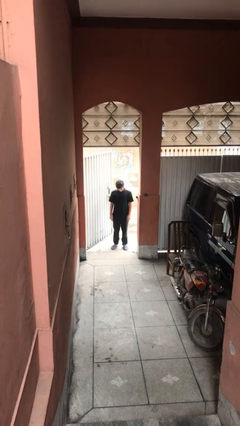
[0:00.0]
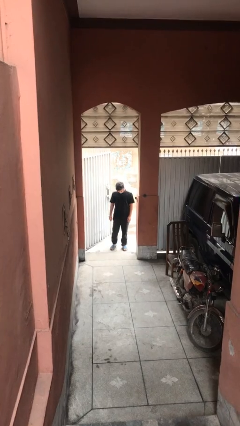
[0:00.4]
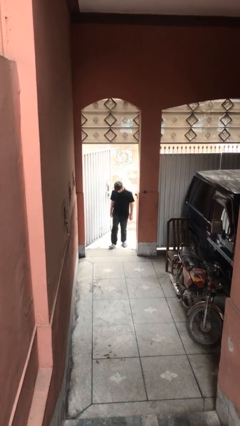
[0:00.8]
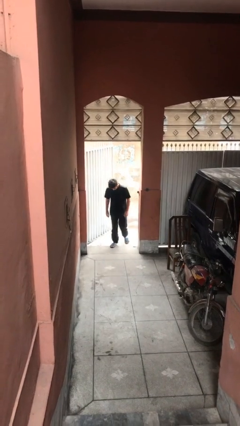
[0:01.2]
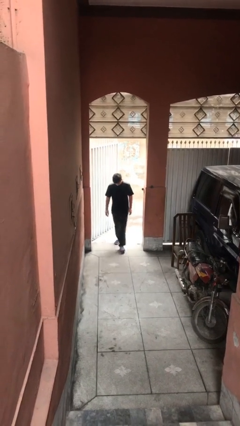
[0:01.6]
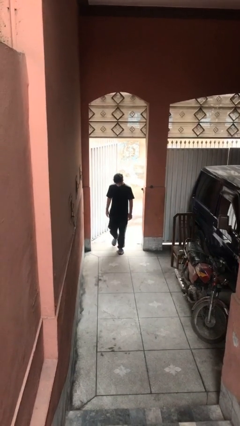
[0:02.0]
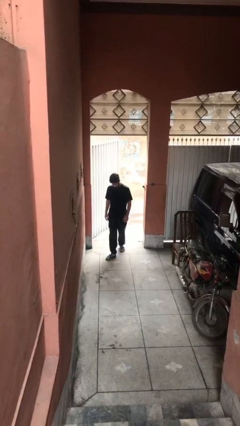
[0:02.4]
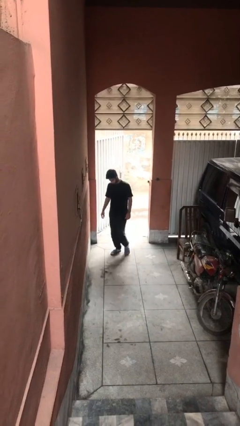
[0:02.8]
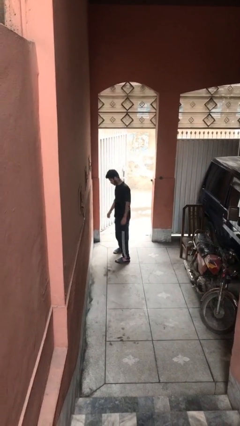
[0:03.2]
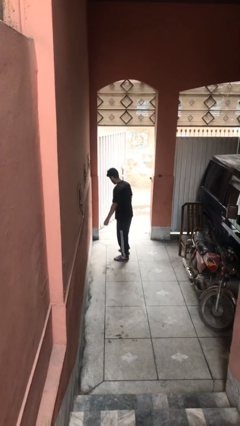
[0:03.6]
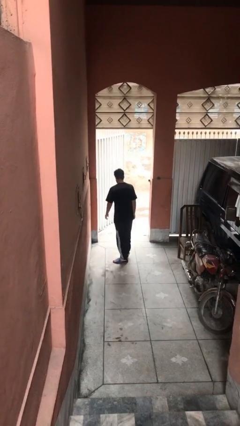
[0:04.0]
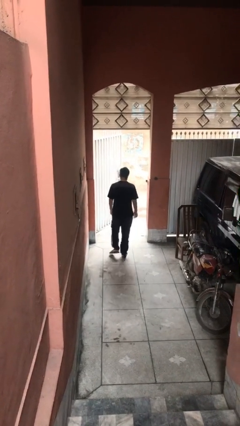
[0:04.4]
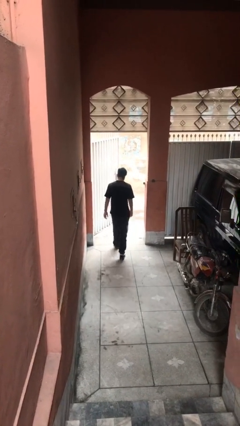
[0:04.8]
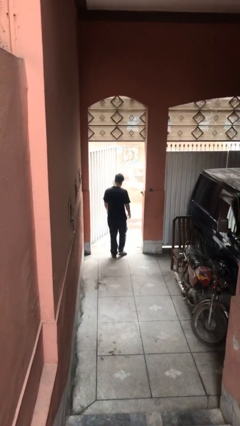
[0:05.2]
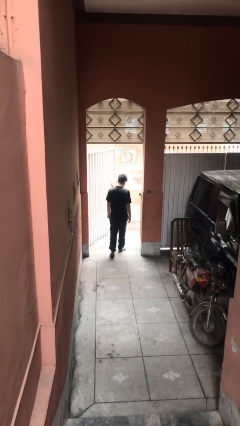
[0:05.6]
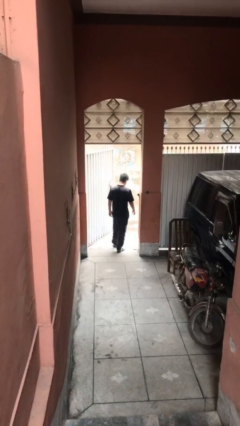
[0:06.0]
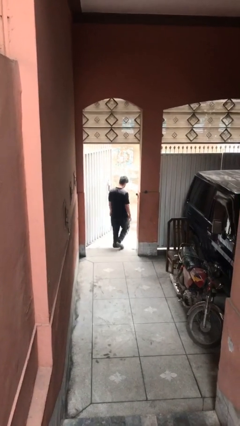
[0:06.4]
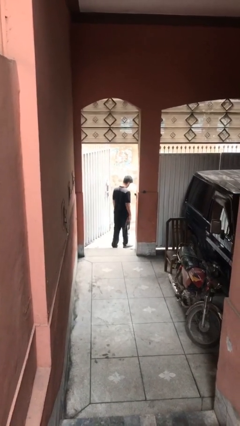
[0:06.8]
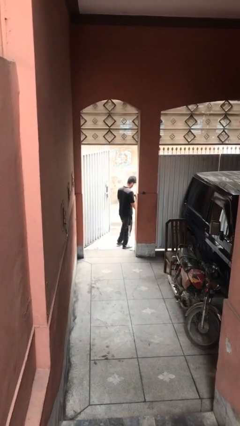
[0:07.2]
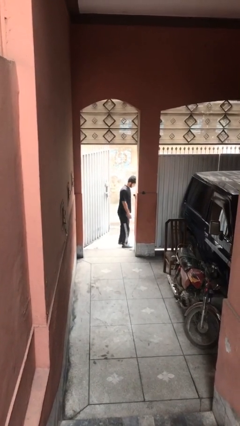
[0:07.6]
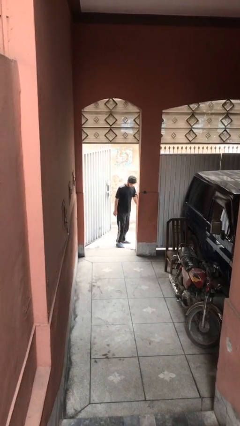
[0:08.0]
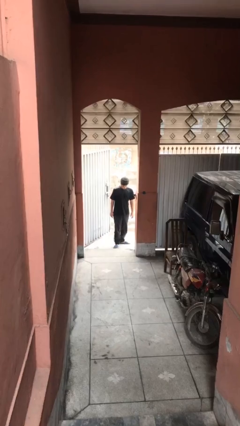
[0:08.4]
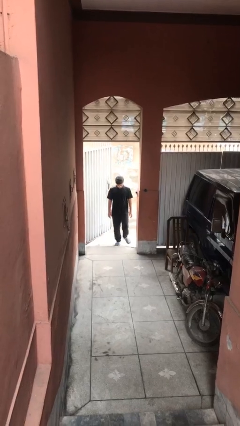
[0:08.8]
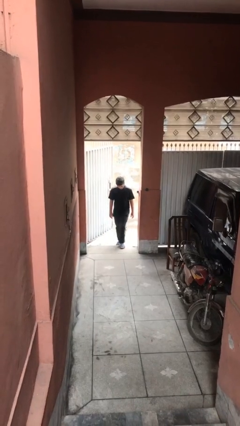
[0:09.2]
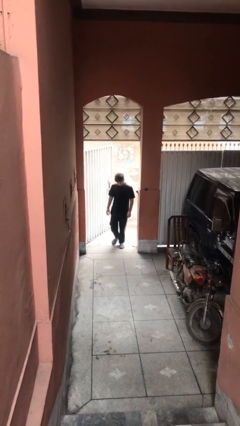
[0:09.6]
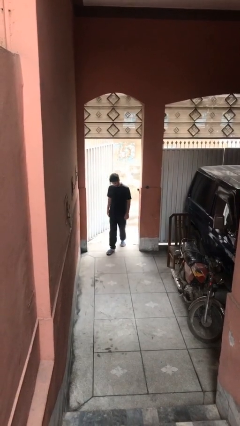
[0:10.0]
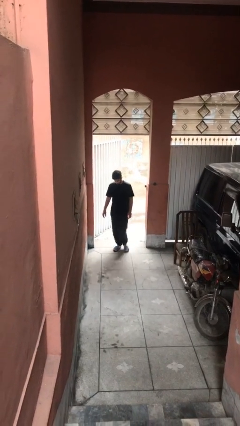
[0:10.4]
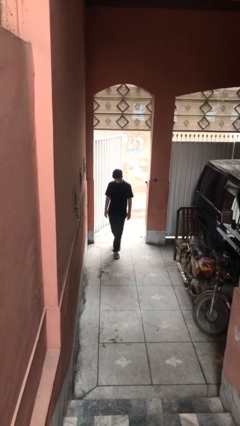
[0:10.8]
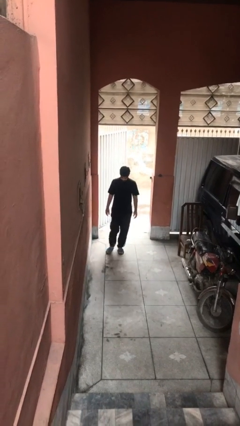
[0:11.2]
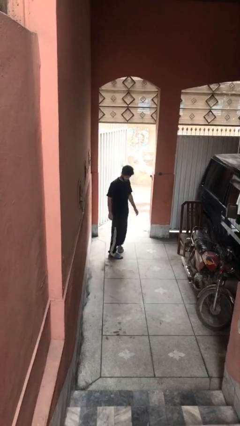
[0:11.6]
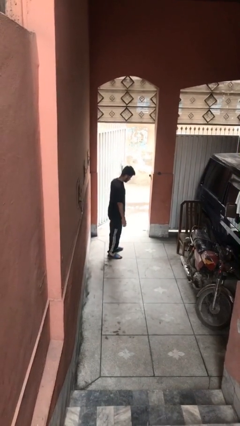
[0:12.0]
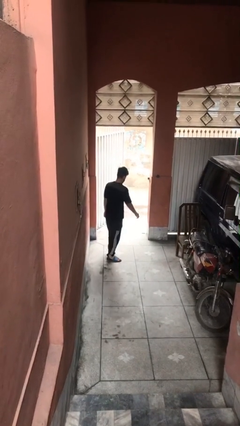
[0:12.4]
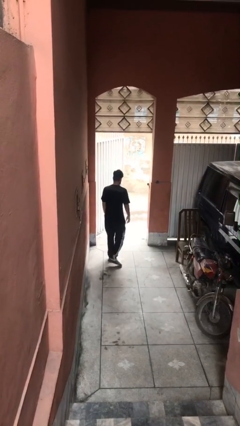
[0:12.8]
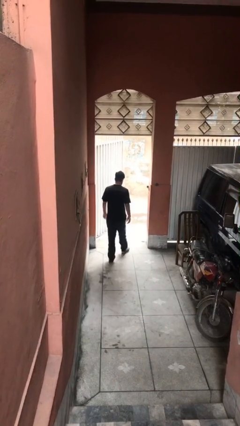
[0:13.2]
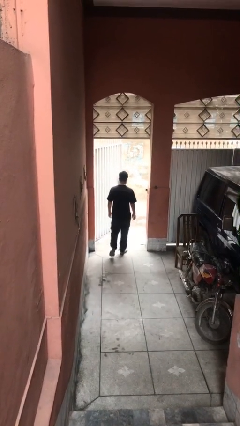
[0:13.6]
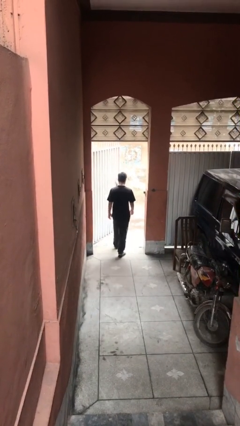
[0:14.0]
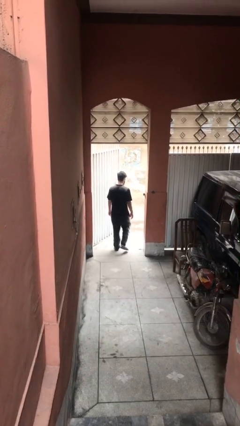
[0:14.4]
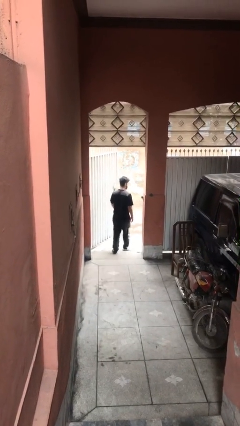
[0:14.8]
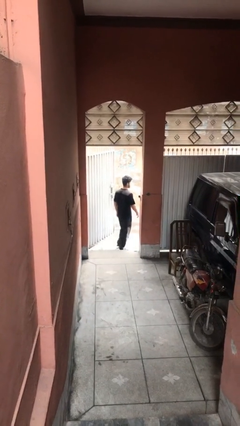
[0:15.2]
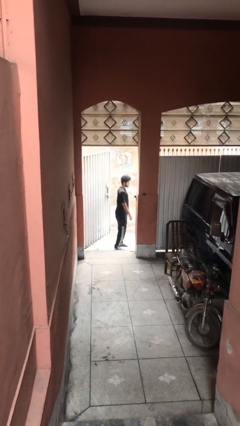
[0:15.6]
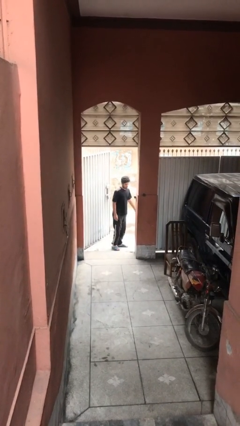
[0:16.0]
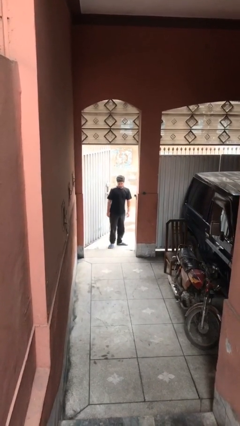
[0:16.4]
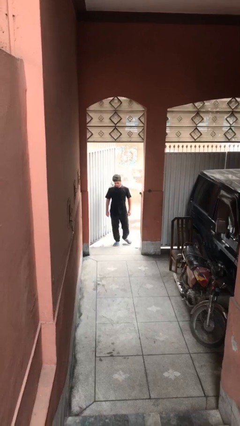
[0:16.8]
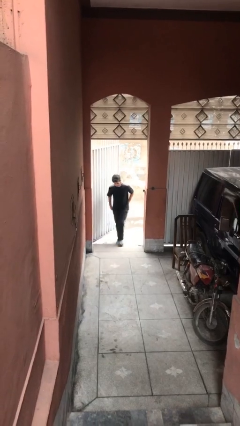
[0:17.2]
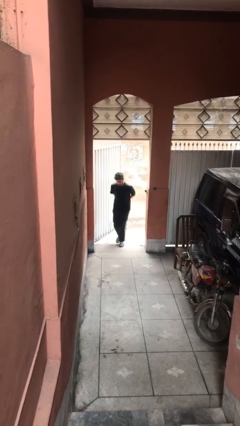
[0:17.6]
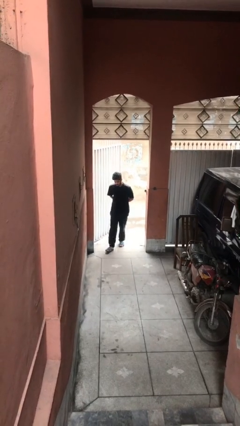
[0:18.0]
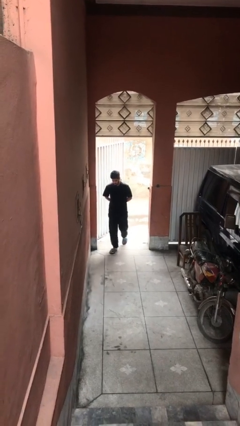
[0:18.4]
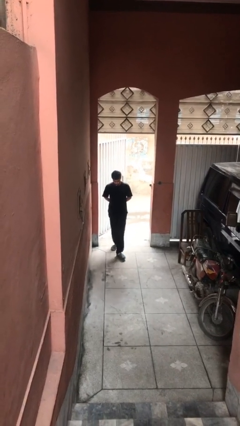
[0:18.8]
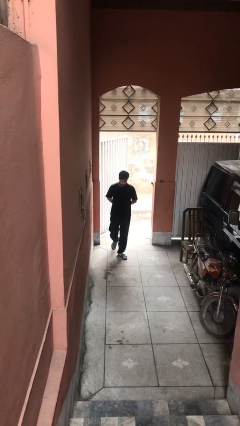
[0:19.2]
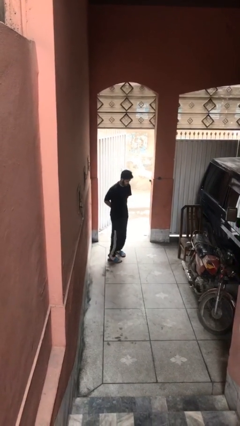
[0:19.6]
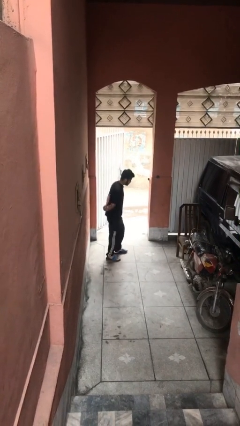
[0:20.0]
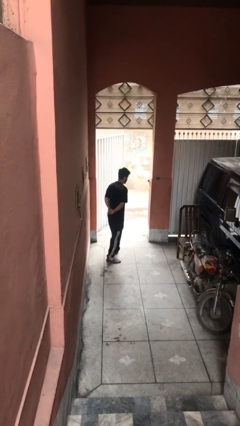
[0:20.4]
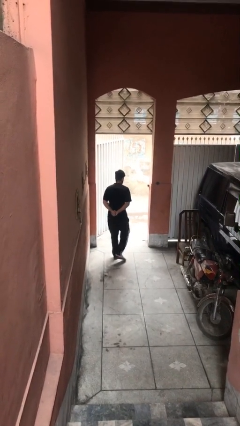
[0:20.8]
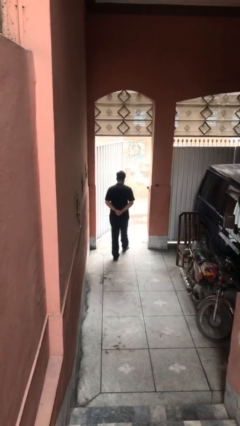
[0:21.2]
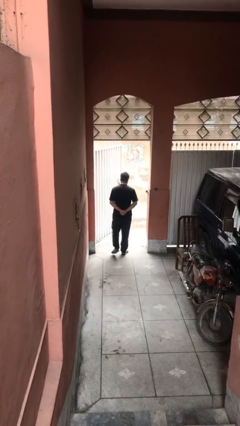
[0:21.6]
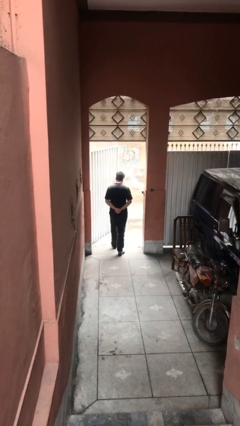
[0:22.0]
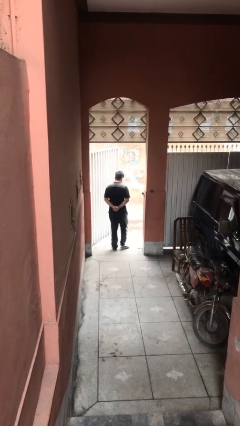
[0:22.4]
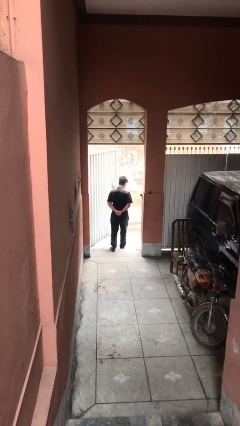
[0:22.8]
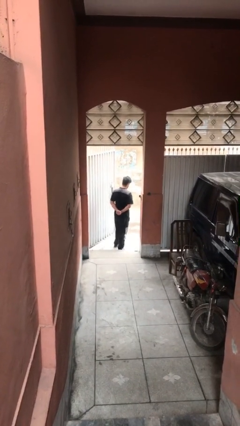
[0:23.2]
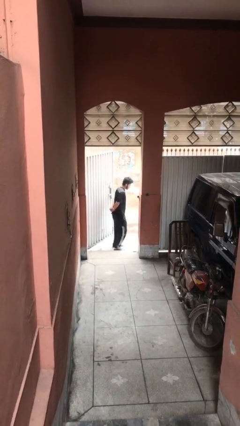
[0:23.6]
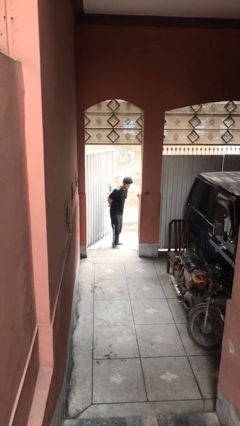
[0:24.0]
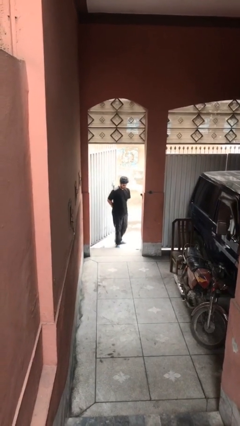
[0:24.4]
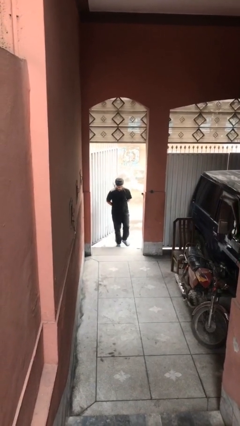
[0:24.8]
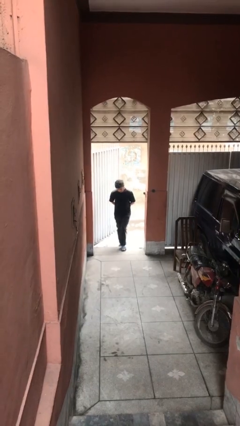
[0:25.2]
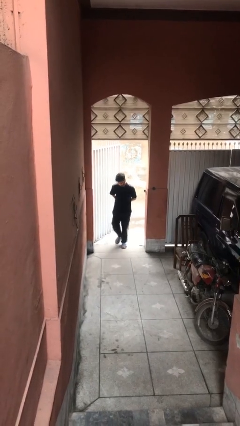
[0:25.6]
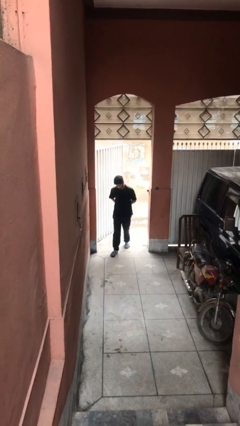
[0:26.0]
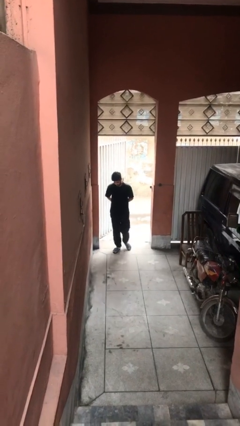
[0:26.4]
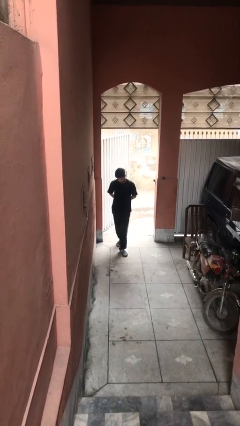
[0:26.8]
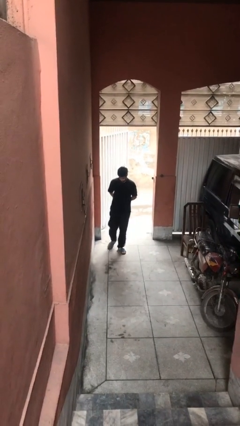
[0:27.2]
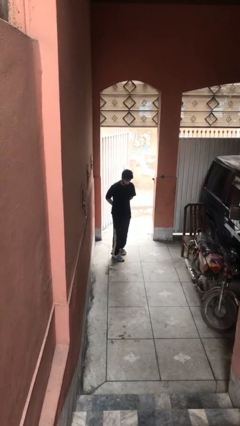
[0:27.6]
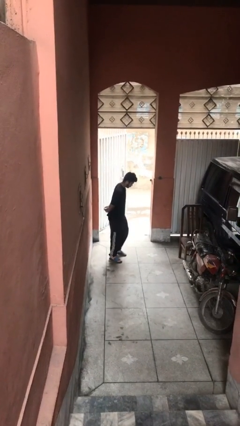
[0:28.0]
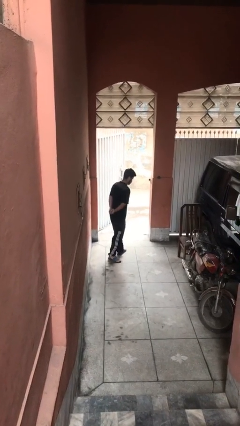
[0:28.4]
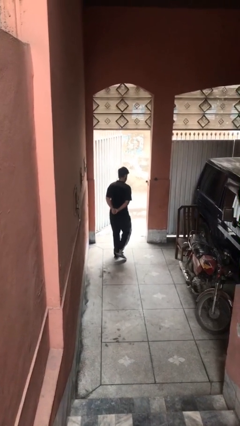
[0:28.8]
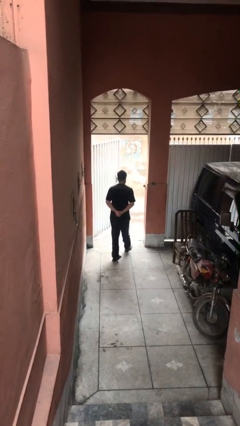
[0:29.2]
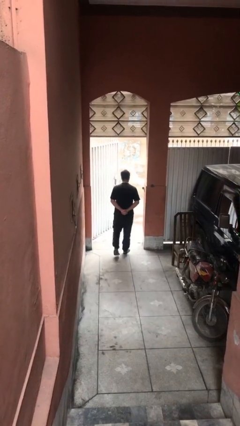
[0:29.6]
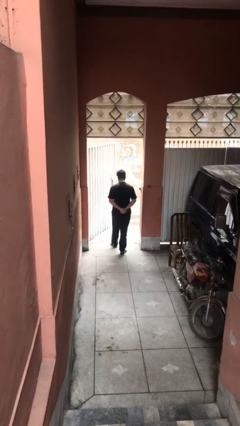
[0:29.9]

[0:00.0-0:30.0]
person walks

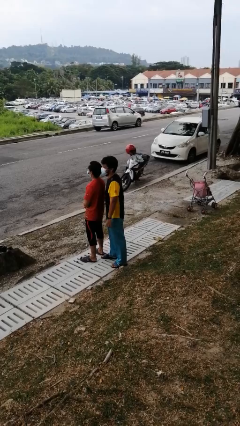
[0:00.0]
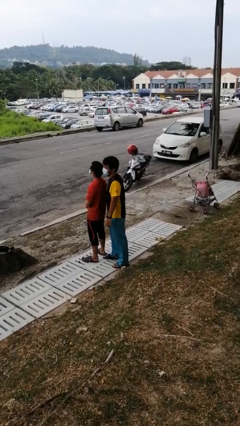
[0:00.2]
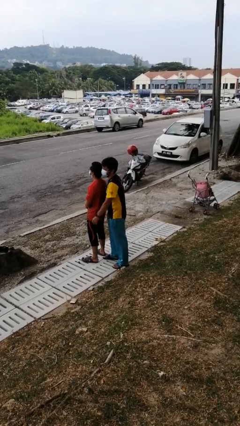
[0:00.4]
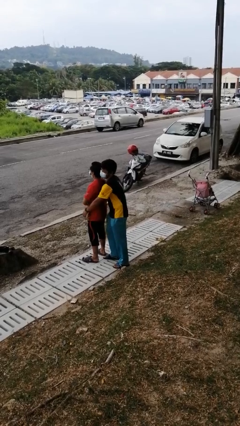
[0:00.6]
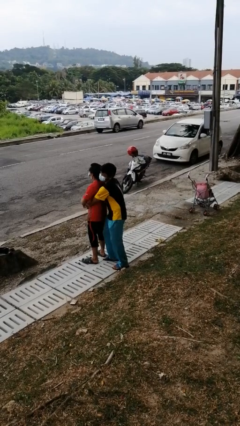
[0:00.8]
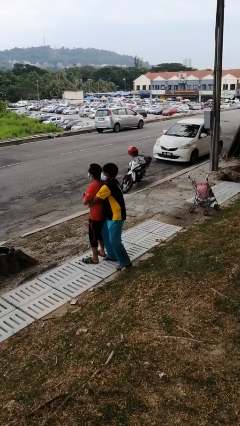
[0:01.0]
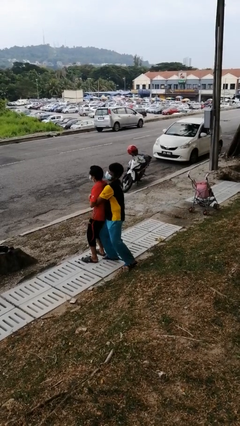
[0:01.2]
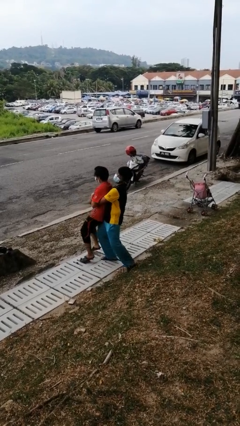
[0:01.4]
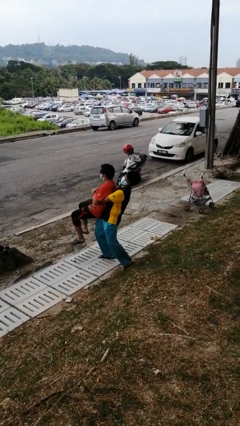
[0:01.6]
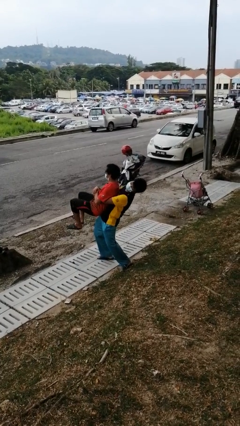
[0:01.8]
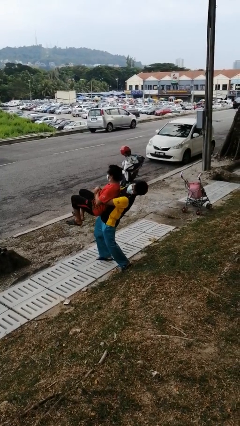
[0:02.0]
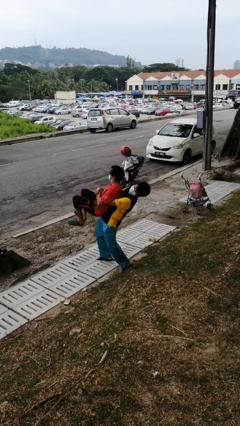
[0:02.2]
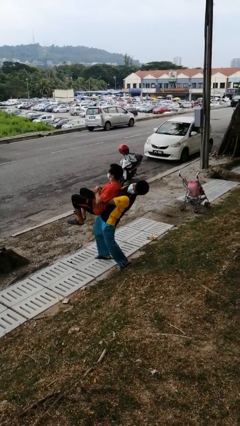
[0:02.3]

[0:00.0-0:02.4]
person picks up person

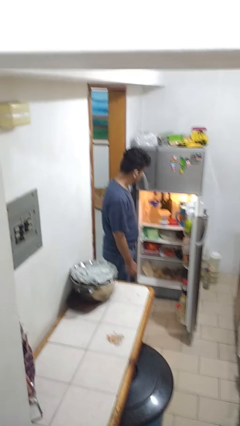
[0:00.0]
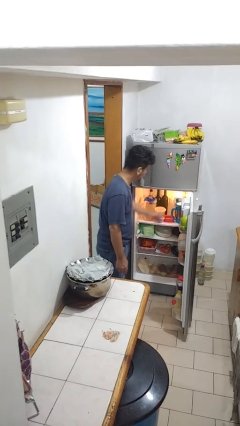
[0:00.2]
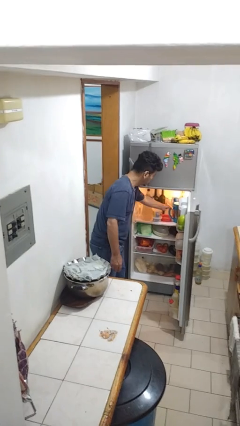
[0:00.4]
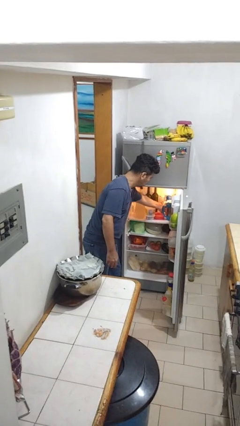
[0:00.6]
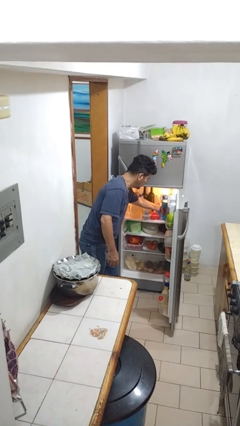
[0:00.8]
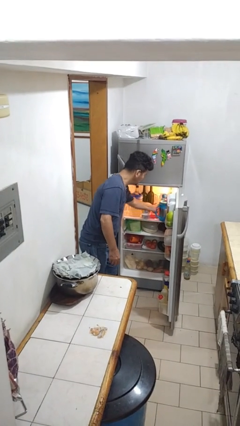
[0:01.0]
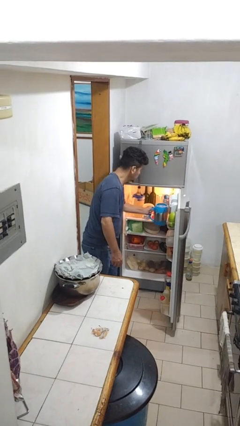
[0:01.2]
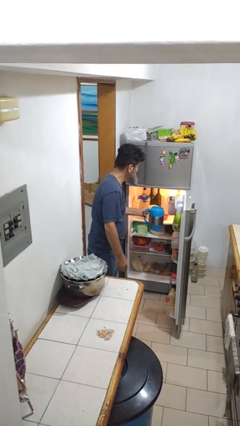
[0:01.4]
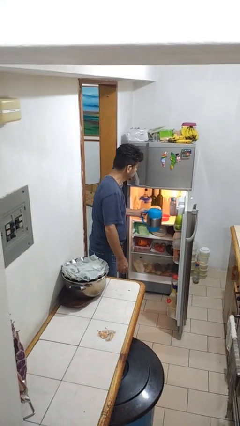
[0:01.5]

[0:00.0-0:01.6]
person takes object from refrigerator
